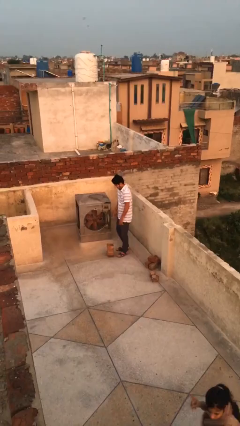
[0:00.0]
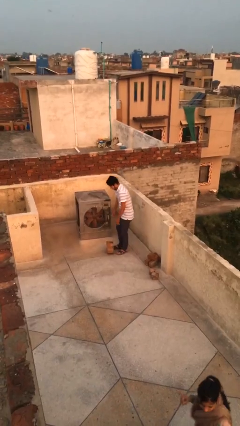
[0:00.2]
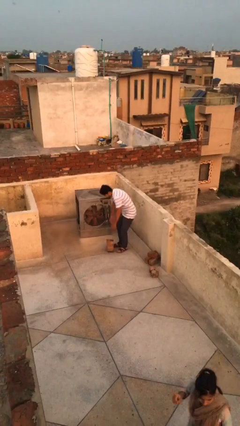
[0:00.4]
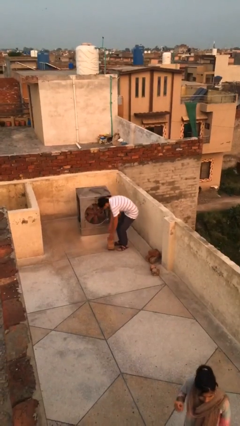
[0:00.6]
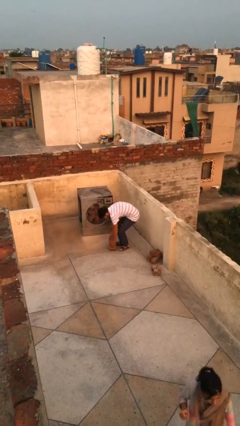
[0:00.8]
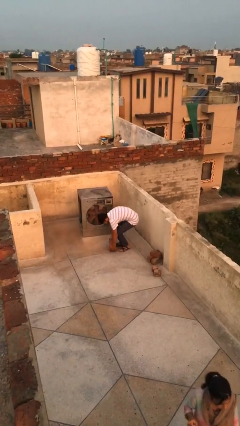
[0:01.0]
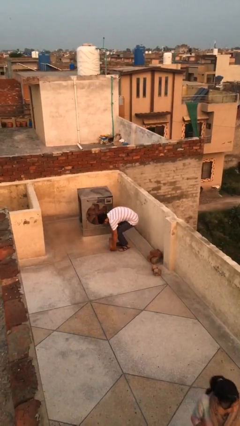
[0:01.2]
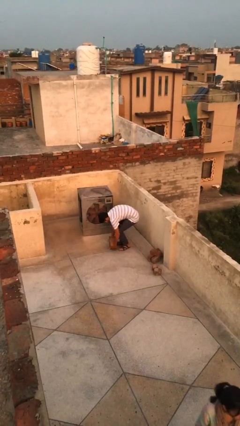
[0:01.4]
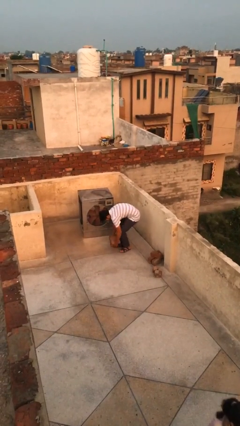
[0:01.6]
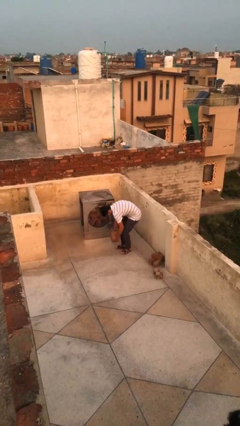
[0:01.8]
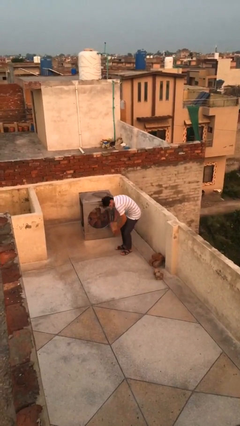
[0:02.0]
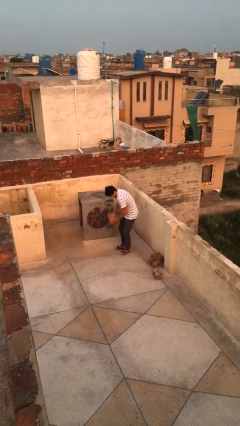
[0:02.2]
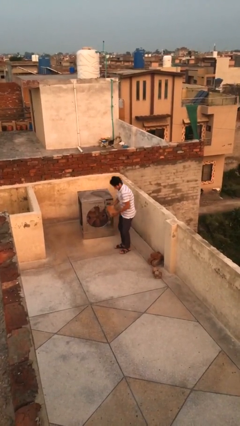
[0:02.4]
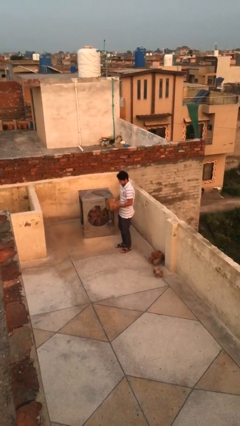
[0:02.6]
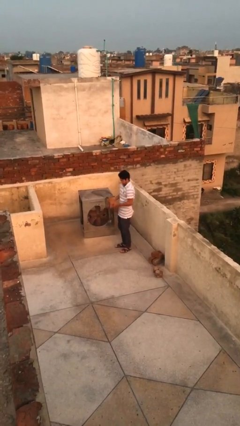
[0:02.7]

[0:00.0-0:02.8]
person picks up object from floor

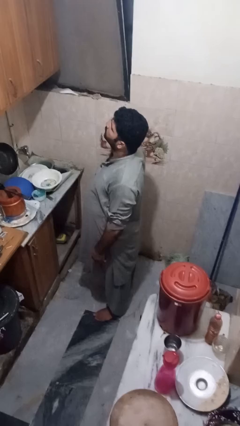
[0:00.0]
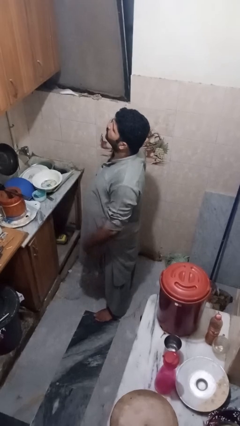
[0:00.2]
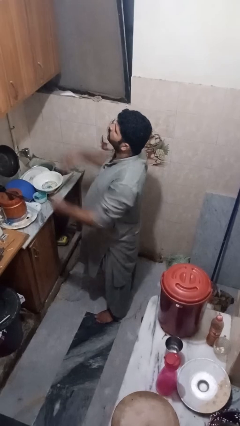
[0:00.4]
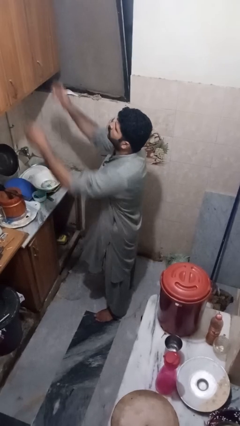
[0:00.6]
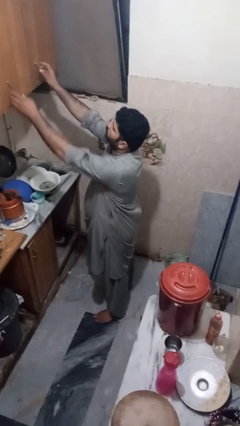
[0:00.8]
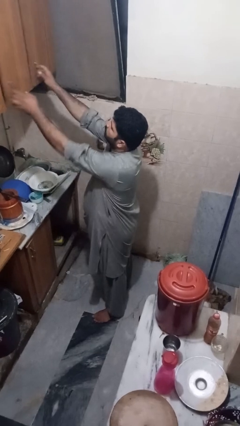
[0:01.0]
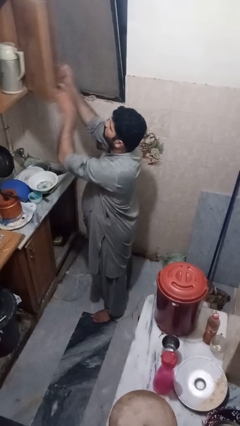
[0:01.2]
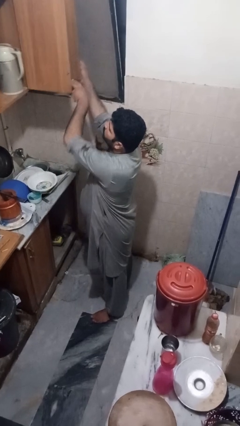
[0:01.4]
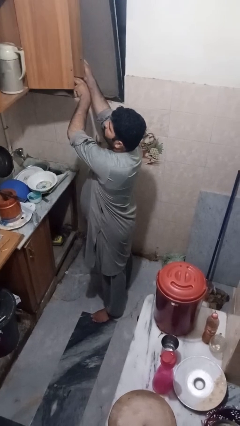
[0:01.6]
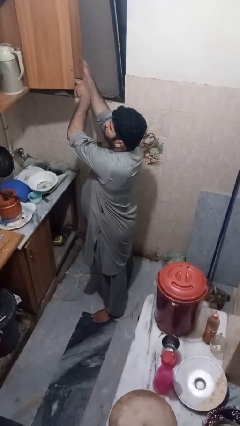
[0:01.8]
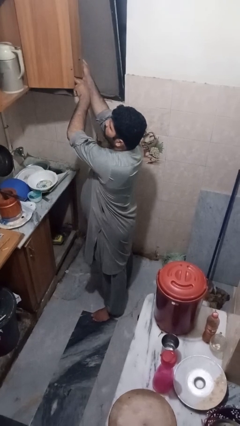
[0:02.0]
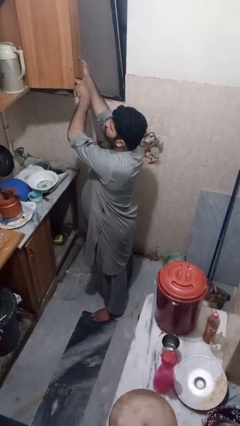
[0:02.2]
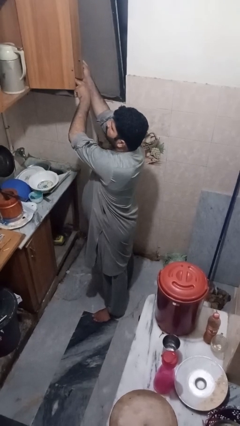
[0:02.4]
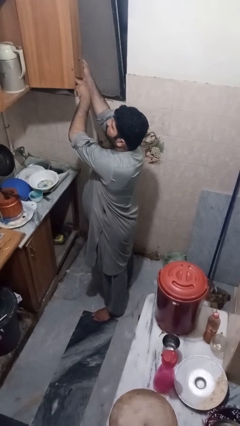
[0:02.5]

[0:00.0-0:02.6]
person opens cabinet

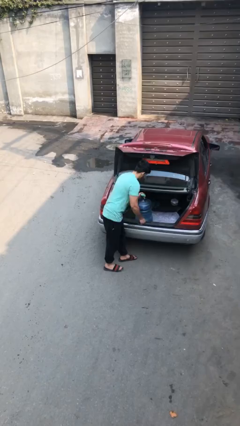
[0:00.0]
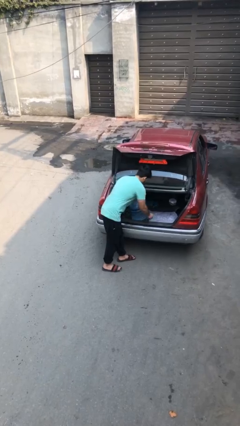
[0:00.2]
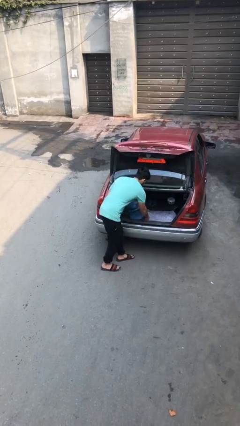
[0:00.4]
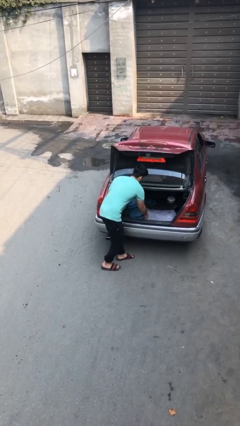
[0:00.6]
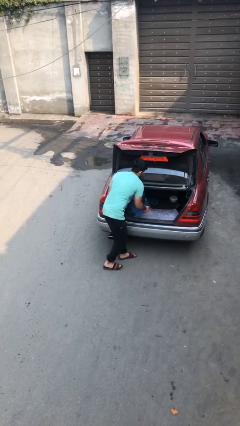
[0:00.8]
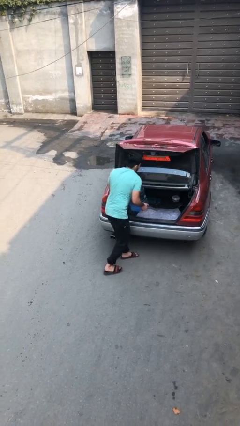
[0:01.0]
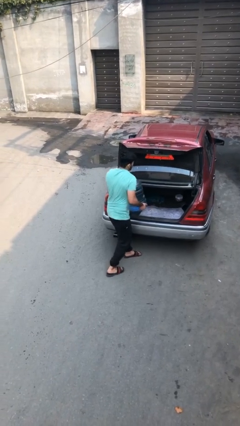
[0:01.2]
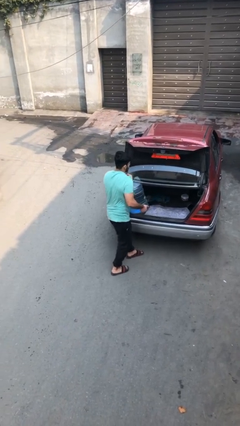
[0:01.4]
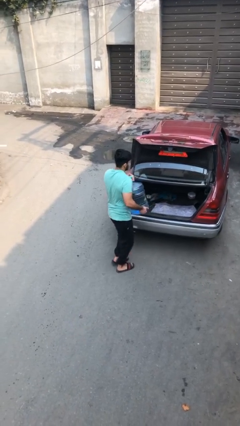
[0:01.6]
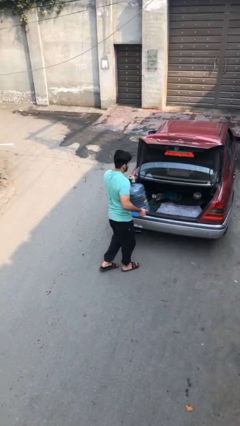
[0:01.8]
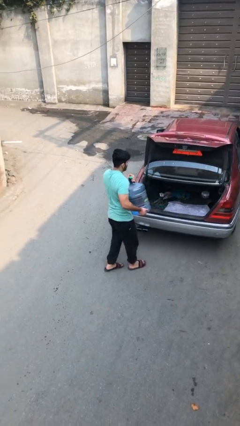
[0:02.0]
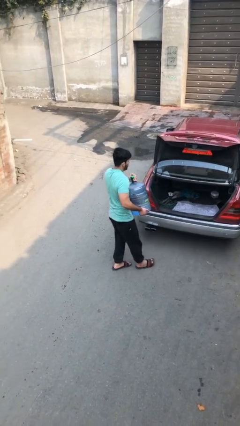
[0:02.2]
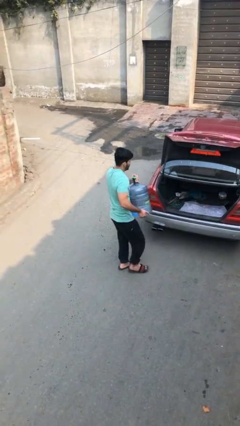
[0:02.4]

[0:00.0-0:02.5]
person unloads car

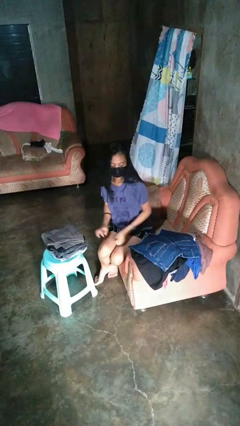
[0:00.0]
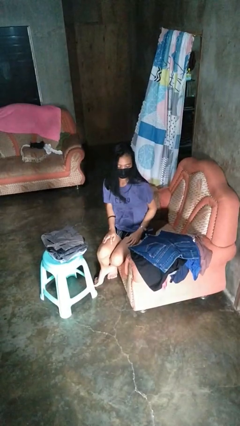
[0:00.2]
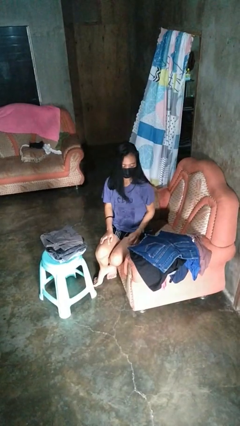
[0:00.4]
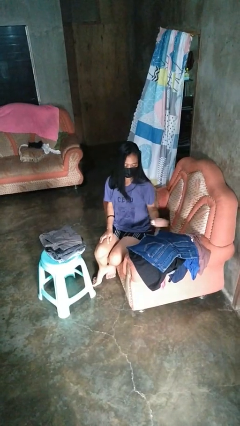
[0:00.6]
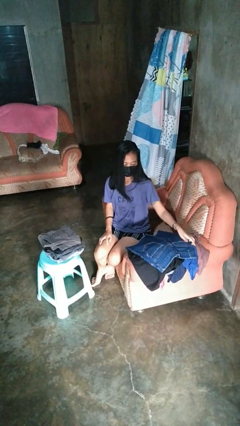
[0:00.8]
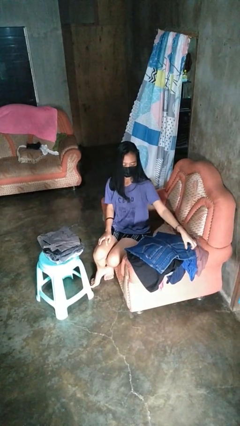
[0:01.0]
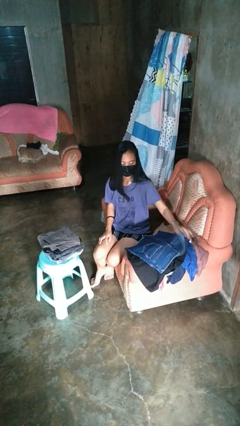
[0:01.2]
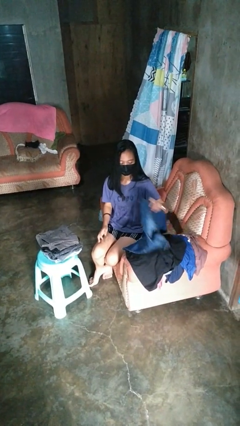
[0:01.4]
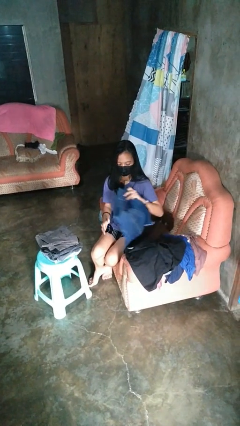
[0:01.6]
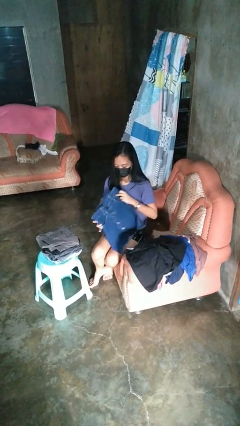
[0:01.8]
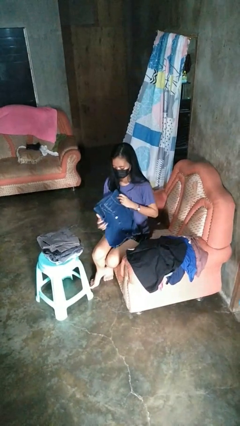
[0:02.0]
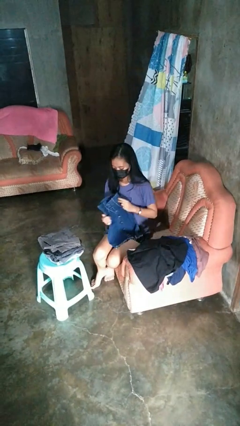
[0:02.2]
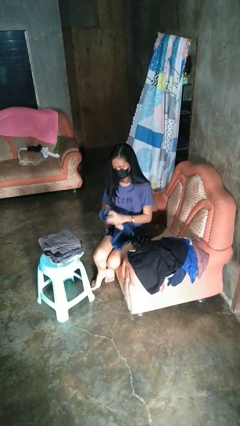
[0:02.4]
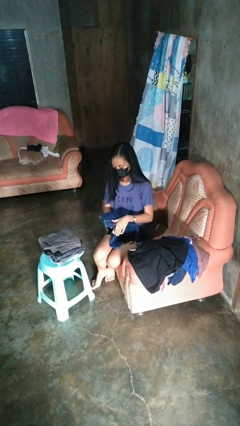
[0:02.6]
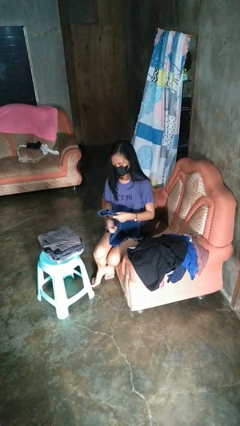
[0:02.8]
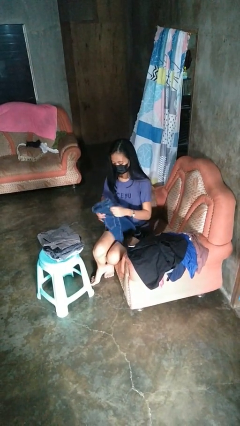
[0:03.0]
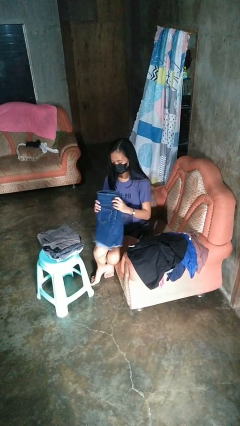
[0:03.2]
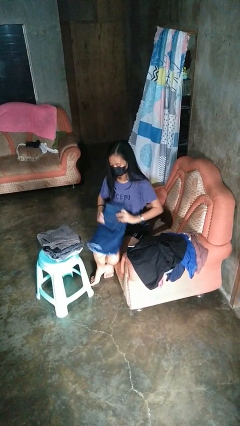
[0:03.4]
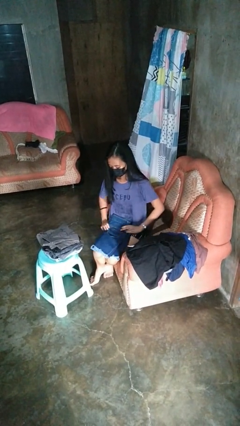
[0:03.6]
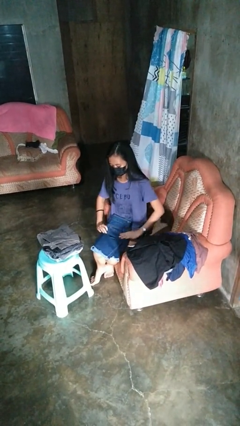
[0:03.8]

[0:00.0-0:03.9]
person folds pants

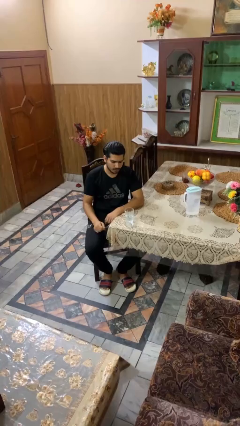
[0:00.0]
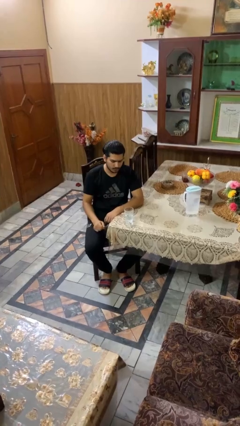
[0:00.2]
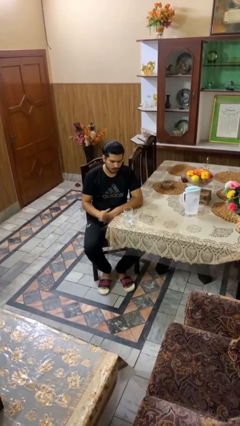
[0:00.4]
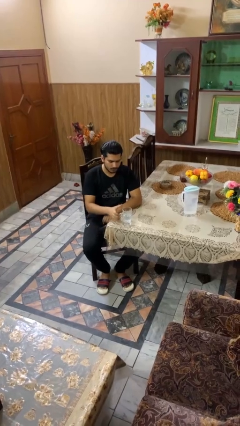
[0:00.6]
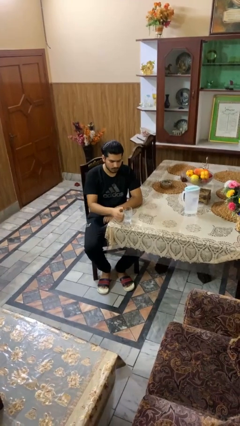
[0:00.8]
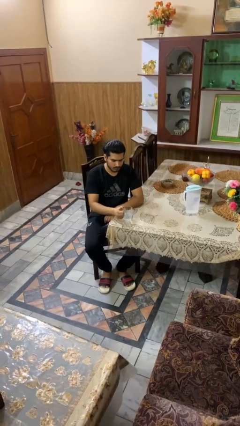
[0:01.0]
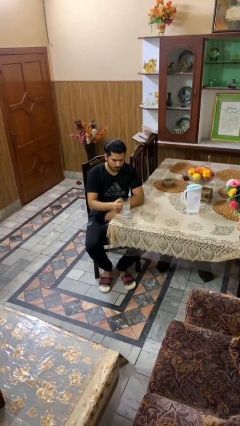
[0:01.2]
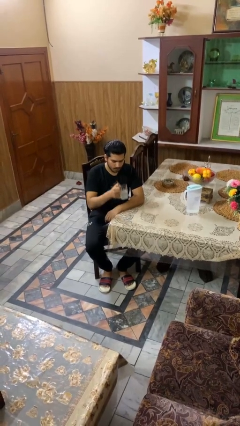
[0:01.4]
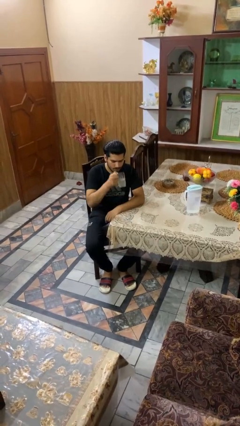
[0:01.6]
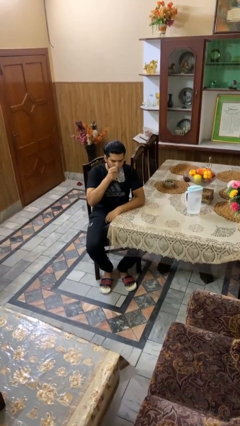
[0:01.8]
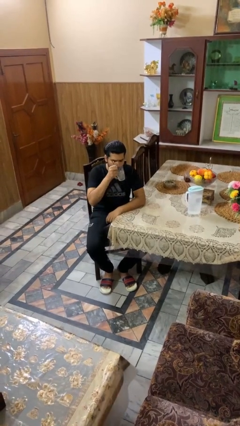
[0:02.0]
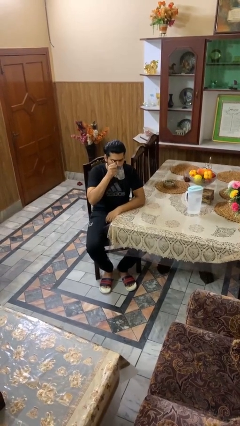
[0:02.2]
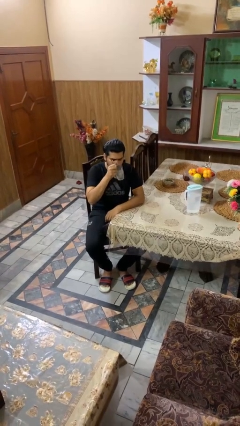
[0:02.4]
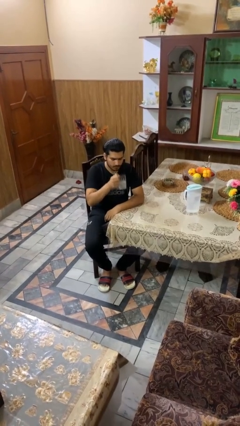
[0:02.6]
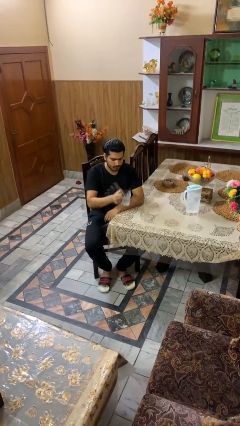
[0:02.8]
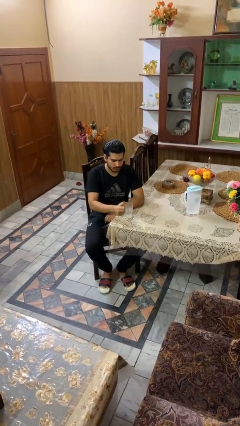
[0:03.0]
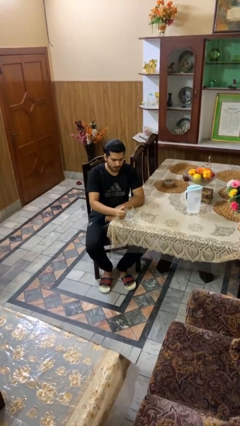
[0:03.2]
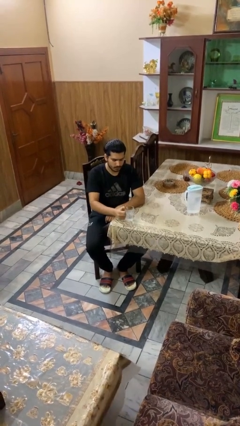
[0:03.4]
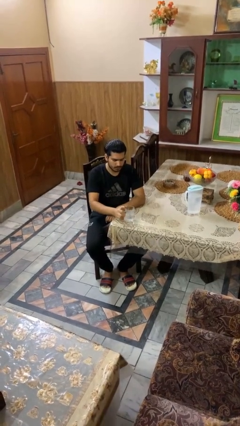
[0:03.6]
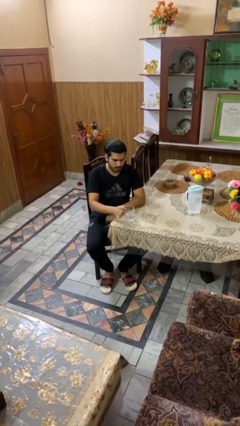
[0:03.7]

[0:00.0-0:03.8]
person drinks from mug

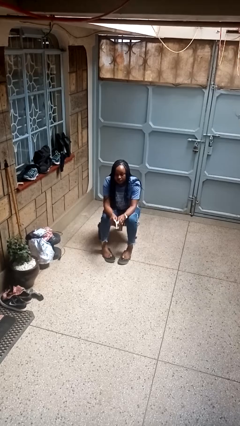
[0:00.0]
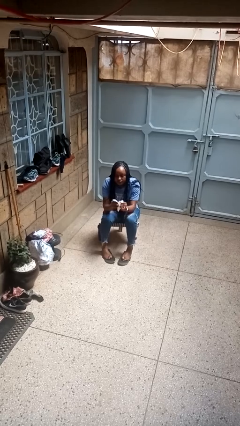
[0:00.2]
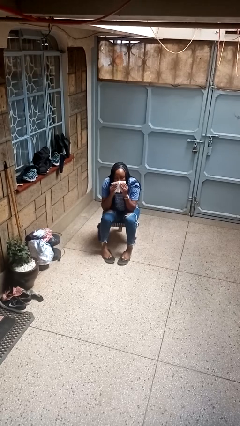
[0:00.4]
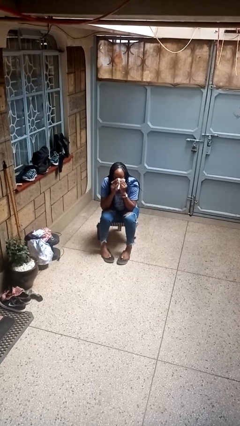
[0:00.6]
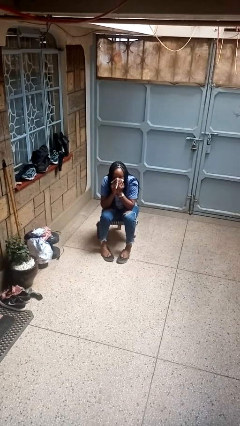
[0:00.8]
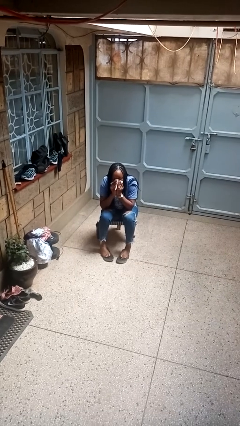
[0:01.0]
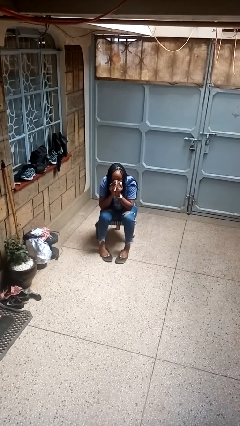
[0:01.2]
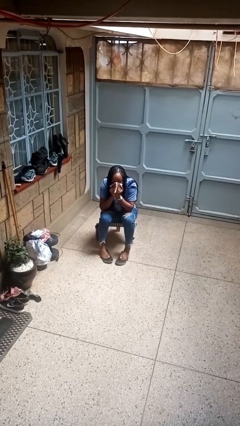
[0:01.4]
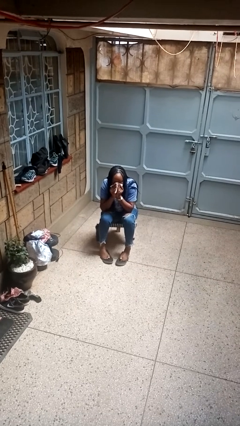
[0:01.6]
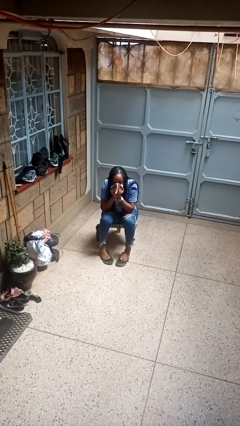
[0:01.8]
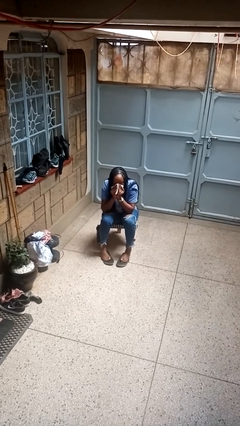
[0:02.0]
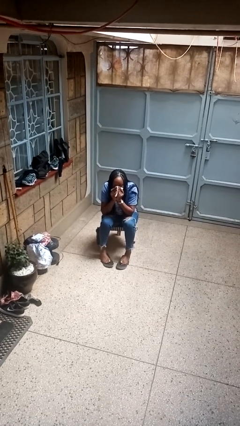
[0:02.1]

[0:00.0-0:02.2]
person blows nose
